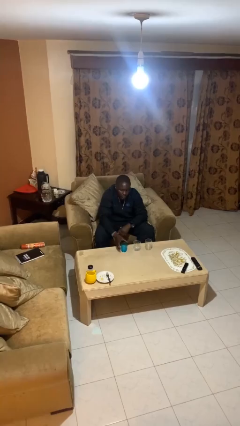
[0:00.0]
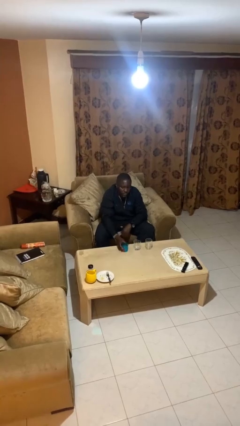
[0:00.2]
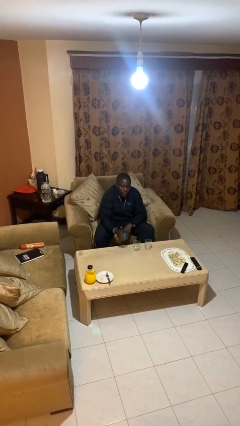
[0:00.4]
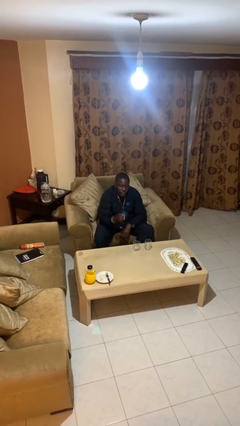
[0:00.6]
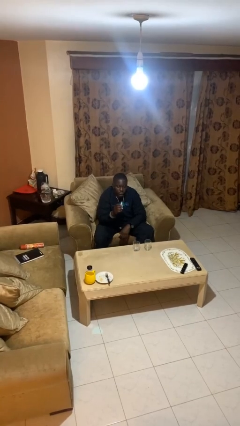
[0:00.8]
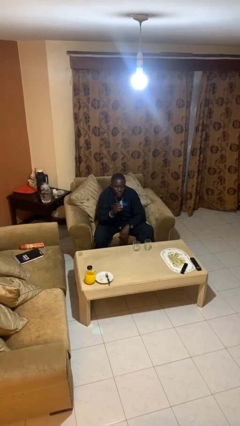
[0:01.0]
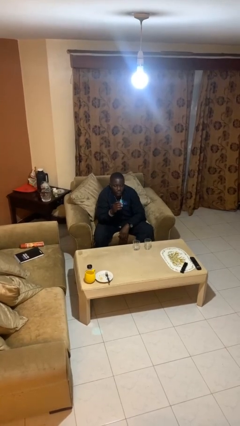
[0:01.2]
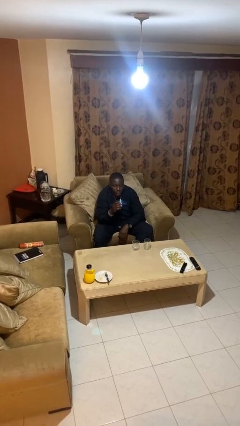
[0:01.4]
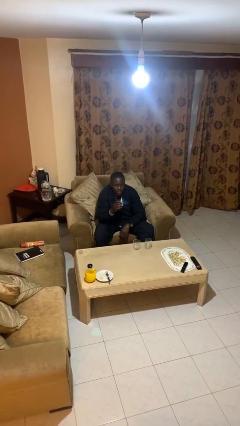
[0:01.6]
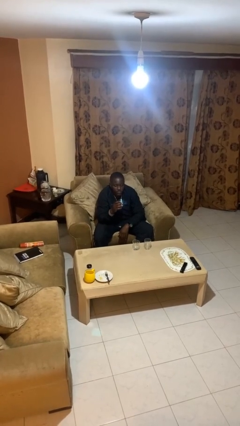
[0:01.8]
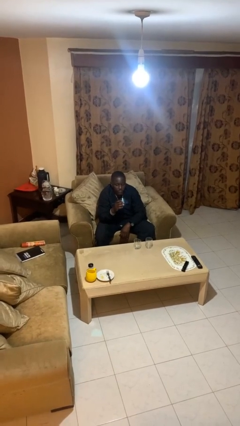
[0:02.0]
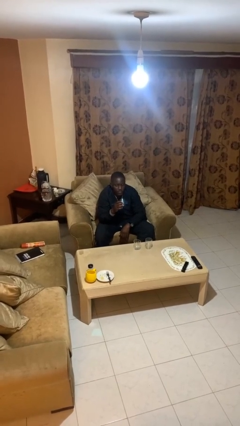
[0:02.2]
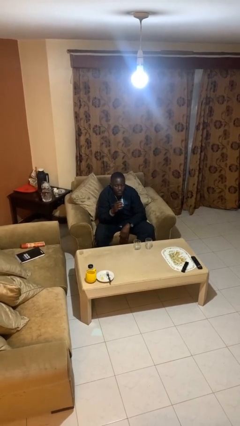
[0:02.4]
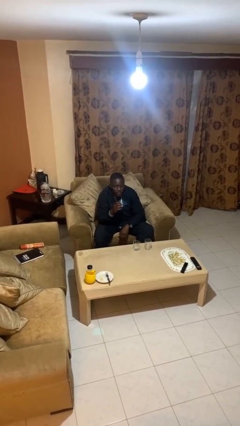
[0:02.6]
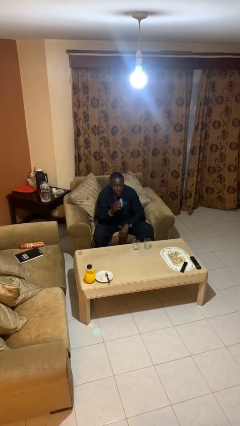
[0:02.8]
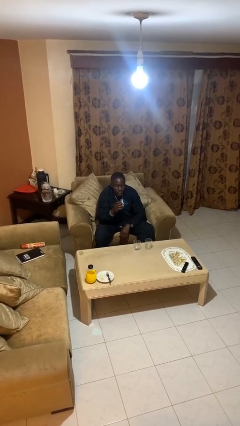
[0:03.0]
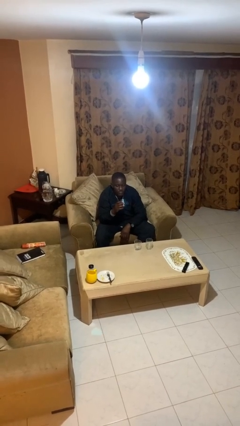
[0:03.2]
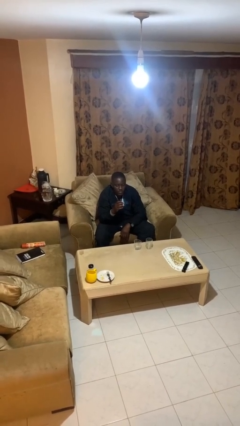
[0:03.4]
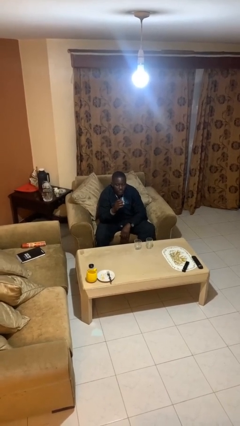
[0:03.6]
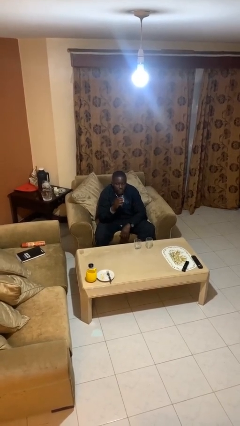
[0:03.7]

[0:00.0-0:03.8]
person picks up object from table

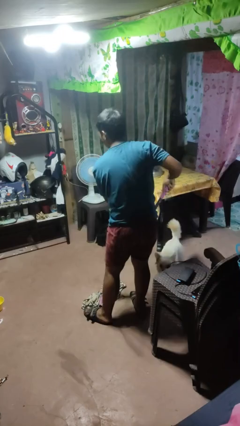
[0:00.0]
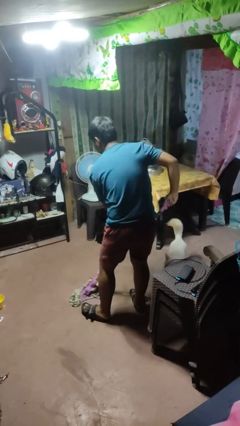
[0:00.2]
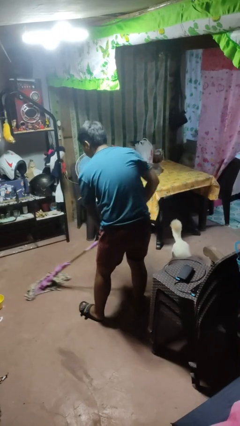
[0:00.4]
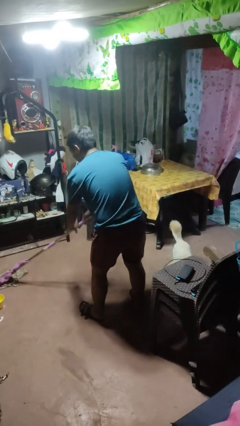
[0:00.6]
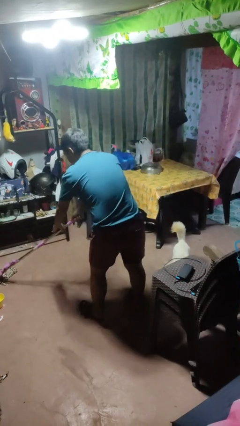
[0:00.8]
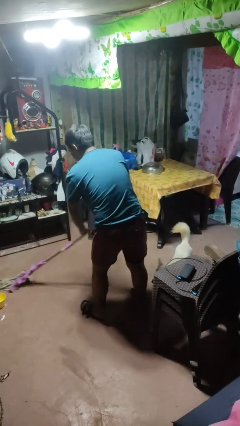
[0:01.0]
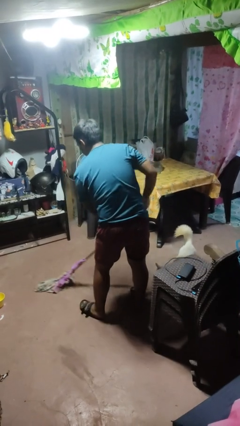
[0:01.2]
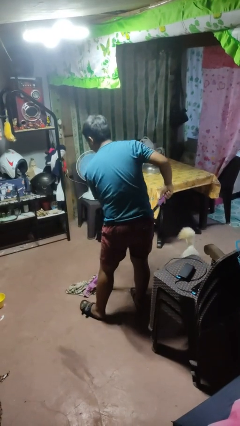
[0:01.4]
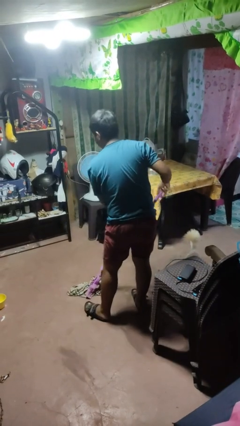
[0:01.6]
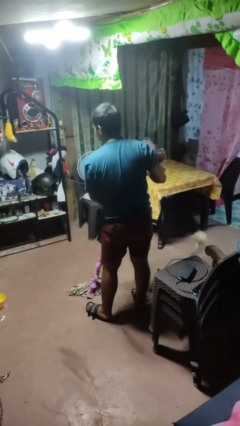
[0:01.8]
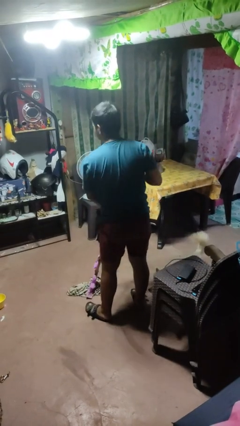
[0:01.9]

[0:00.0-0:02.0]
person mops

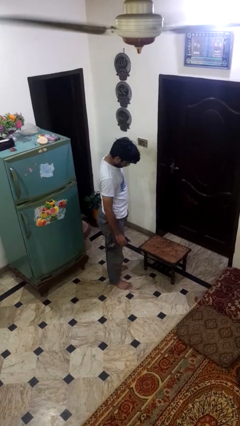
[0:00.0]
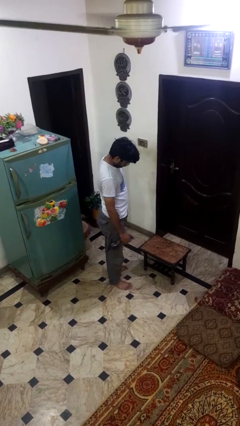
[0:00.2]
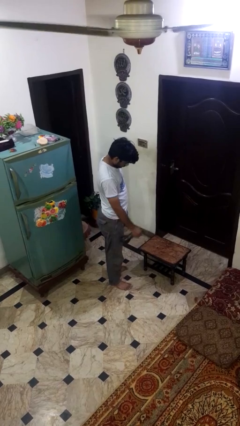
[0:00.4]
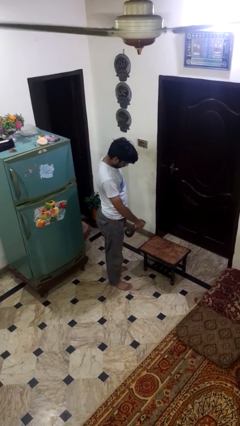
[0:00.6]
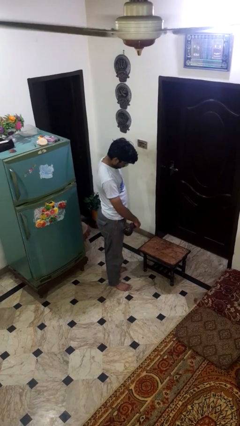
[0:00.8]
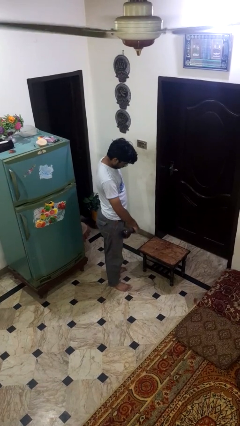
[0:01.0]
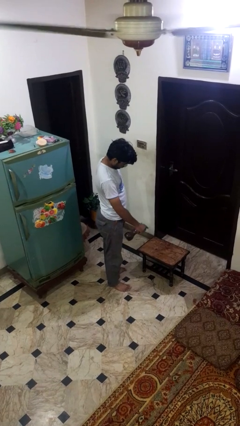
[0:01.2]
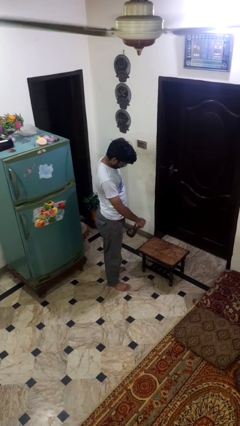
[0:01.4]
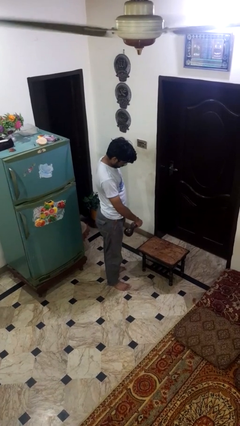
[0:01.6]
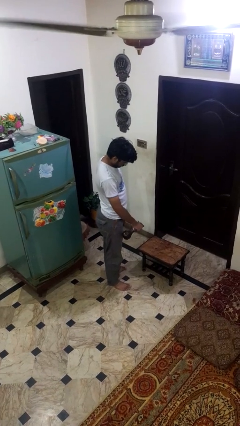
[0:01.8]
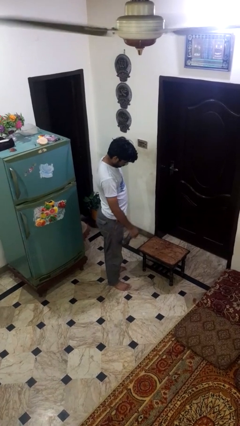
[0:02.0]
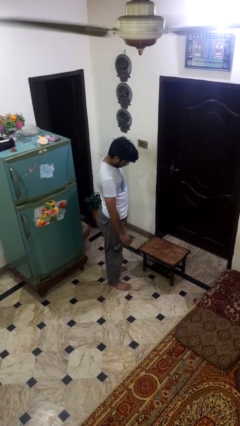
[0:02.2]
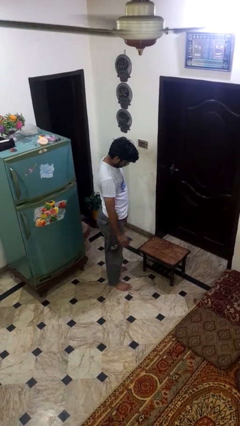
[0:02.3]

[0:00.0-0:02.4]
person sprays from bottle

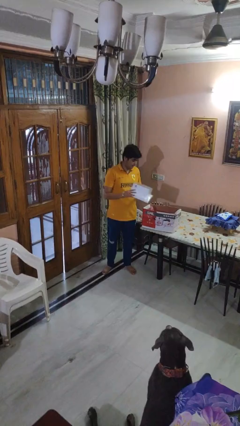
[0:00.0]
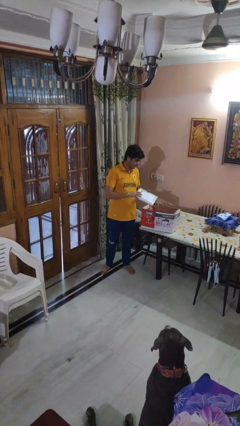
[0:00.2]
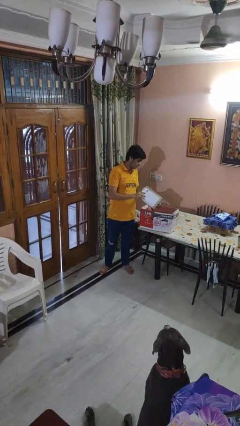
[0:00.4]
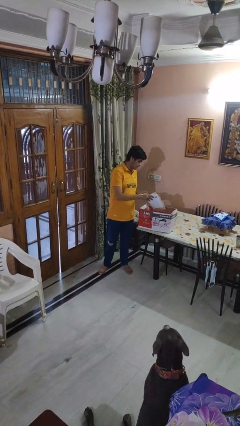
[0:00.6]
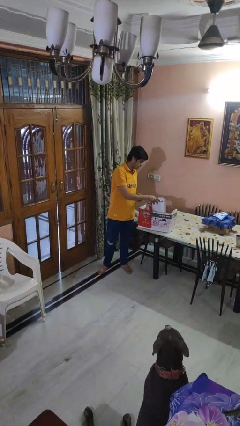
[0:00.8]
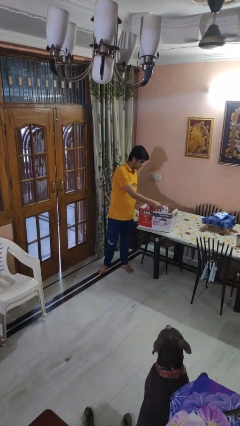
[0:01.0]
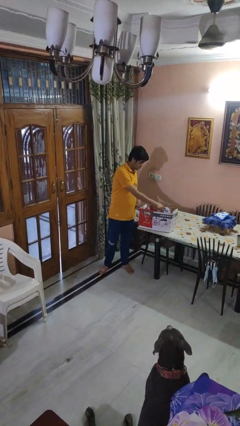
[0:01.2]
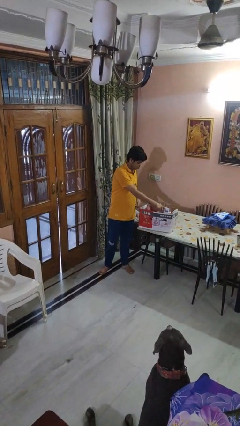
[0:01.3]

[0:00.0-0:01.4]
person puts object into box

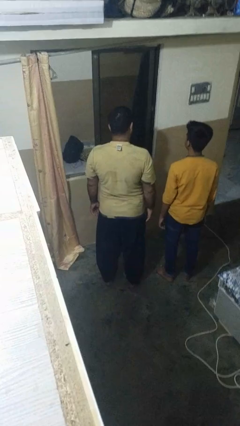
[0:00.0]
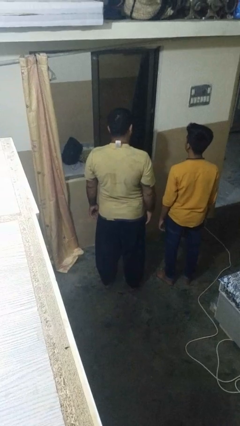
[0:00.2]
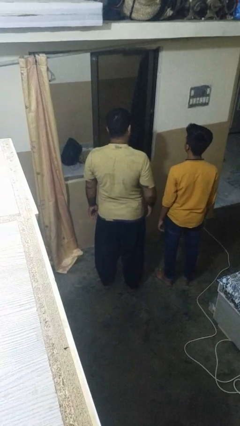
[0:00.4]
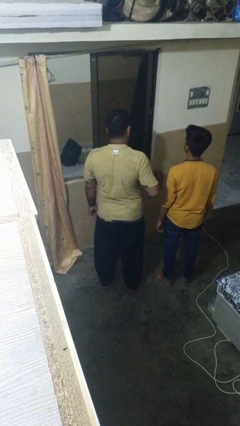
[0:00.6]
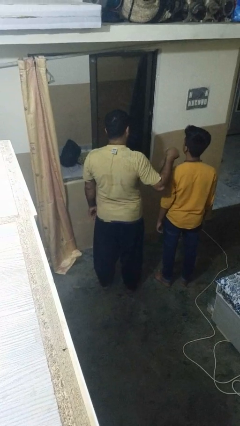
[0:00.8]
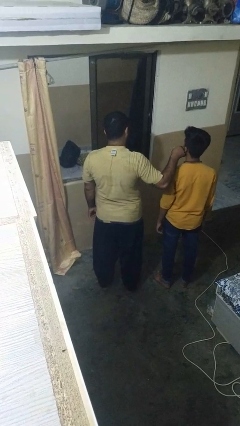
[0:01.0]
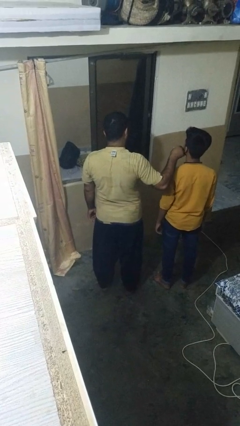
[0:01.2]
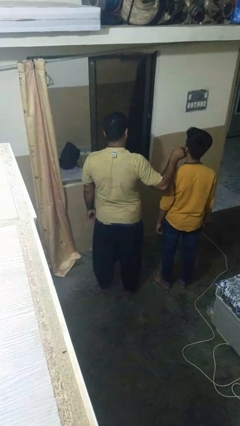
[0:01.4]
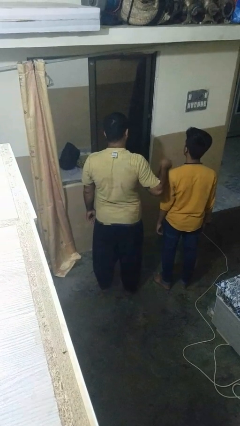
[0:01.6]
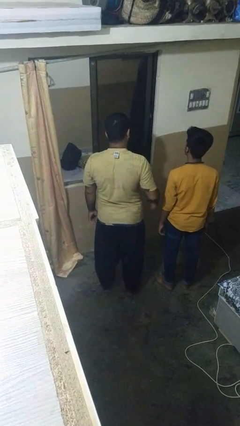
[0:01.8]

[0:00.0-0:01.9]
person touches face of person

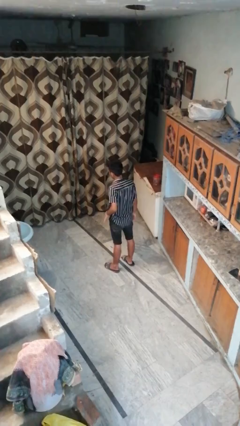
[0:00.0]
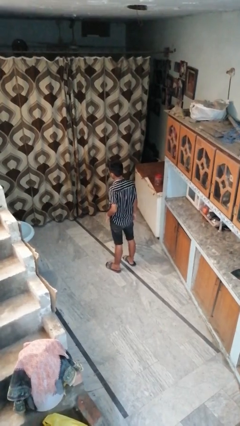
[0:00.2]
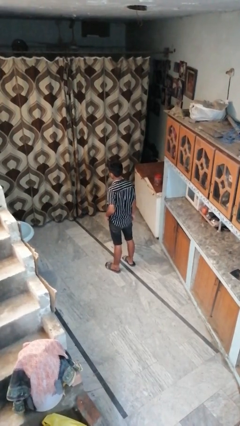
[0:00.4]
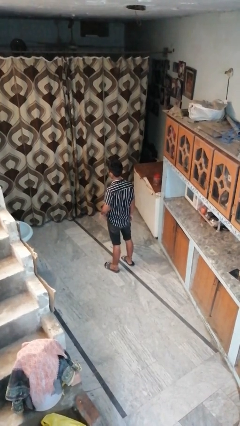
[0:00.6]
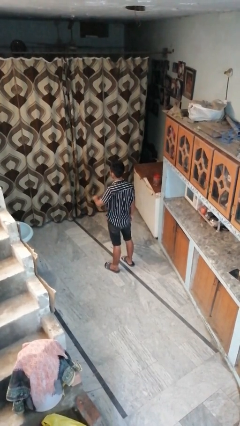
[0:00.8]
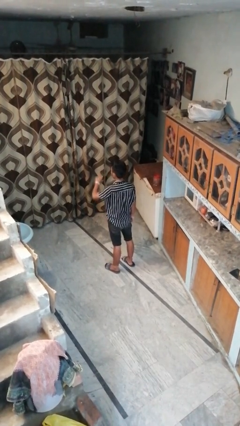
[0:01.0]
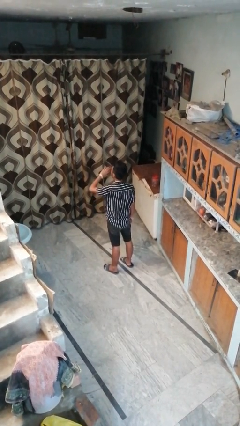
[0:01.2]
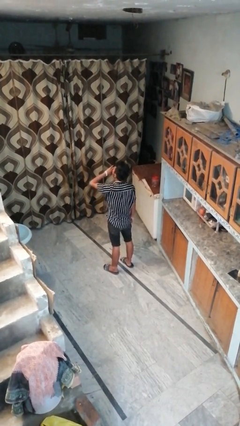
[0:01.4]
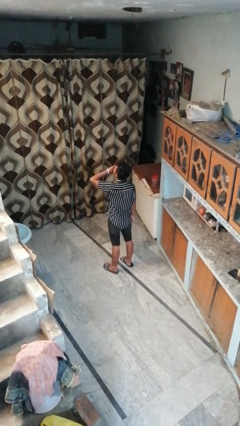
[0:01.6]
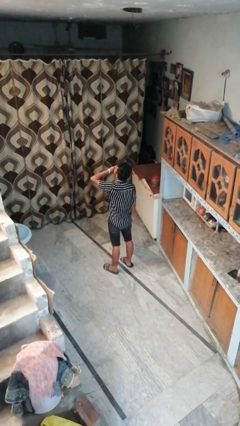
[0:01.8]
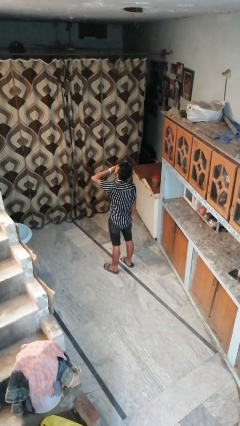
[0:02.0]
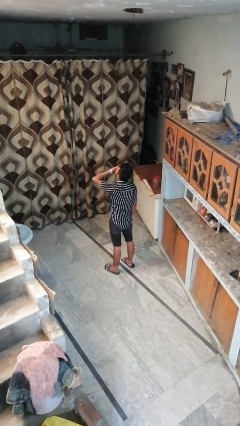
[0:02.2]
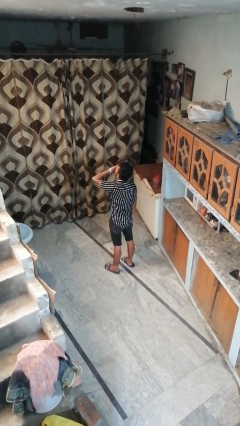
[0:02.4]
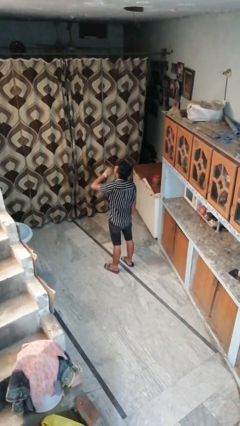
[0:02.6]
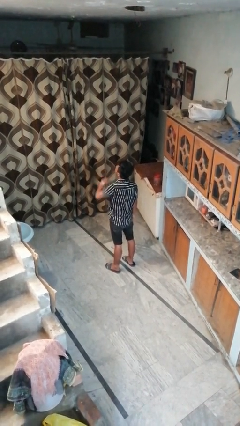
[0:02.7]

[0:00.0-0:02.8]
person yawns

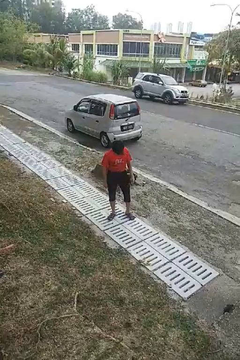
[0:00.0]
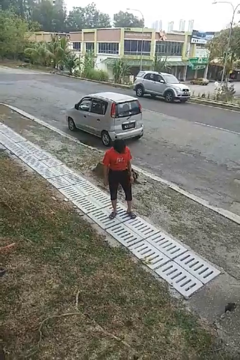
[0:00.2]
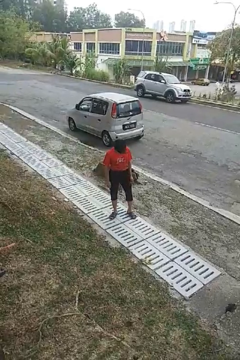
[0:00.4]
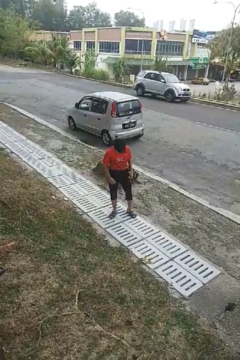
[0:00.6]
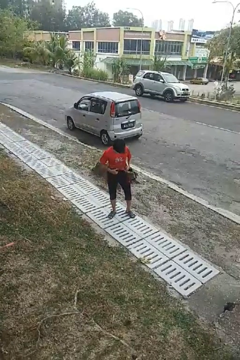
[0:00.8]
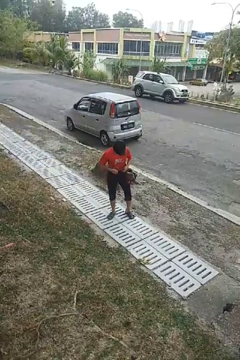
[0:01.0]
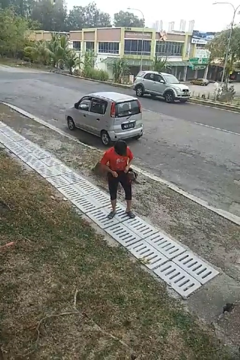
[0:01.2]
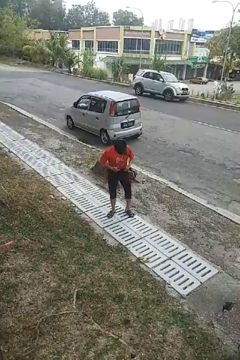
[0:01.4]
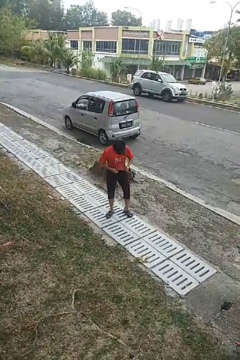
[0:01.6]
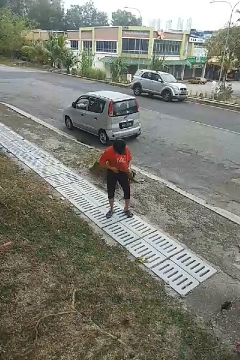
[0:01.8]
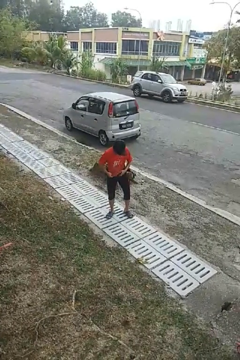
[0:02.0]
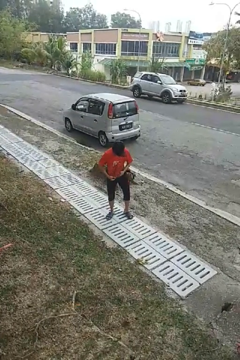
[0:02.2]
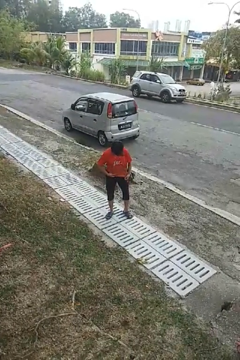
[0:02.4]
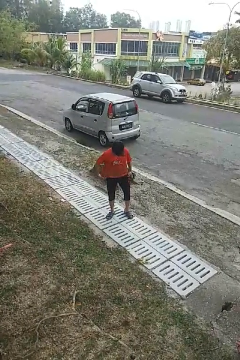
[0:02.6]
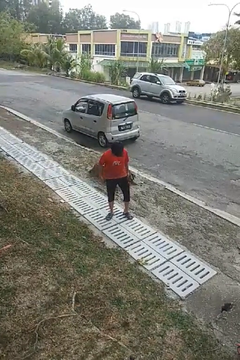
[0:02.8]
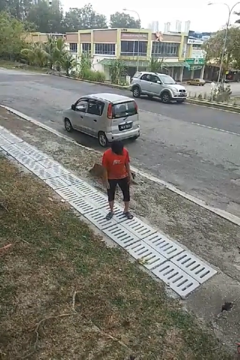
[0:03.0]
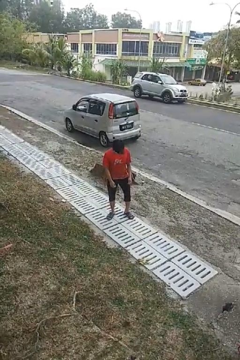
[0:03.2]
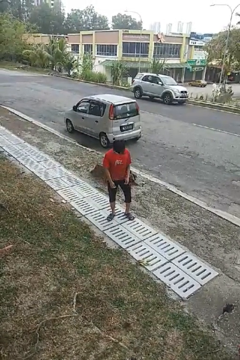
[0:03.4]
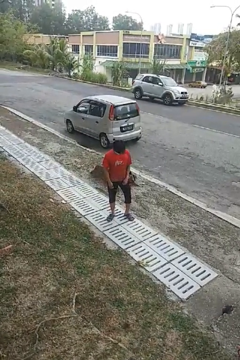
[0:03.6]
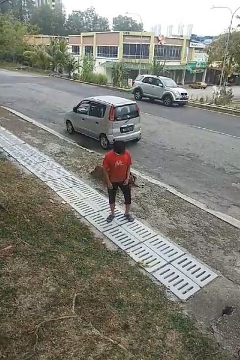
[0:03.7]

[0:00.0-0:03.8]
person untucks shirt
